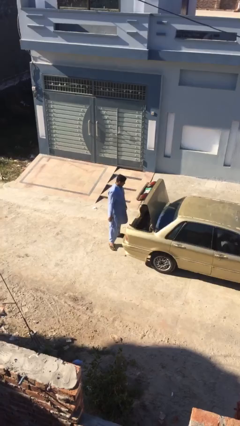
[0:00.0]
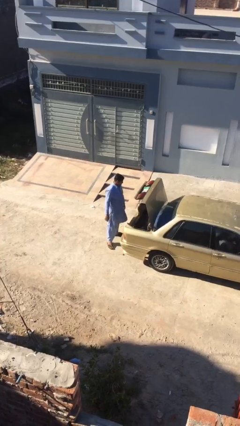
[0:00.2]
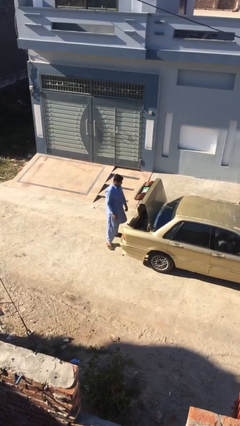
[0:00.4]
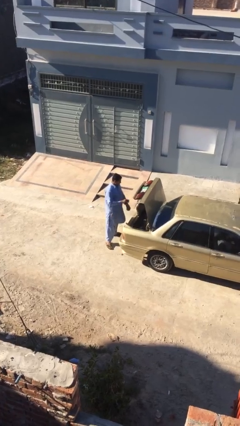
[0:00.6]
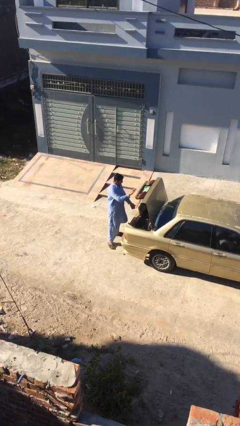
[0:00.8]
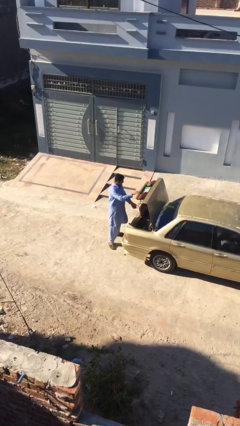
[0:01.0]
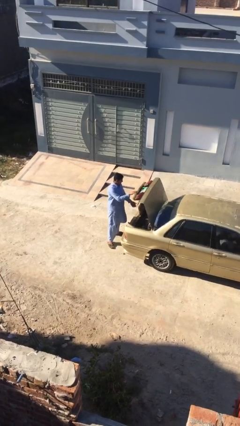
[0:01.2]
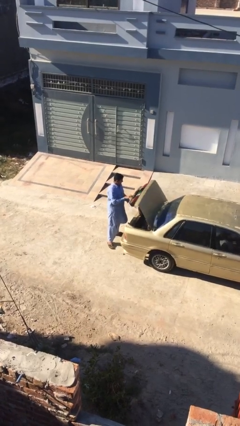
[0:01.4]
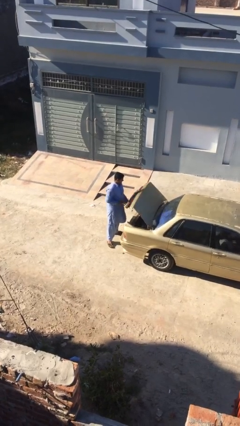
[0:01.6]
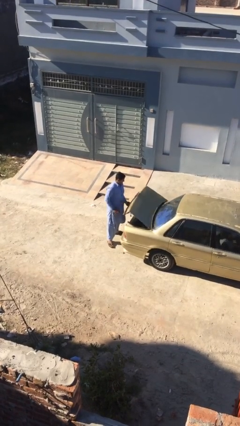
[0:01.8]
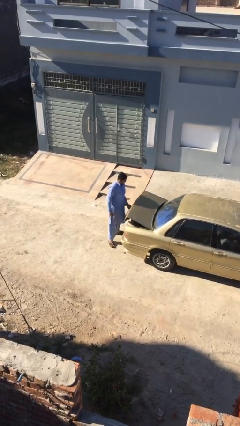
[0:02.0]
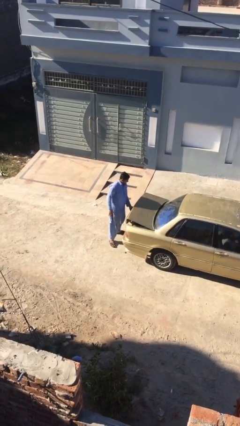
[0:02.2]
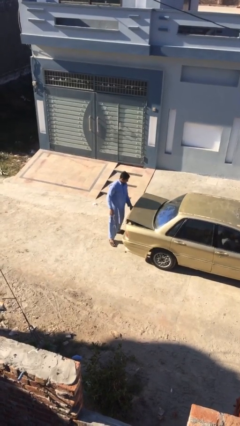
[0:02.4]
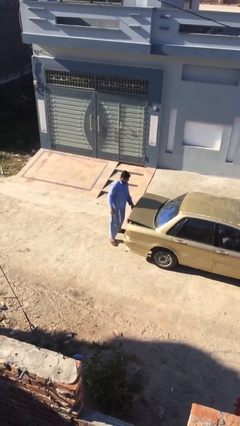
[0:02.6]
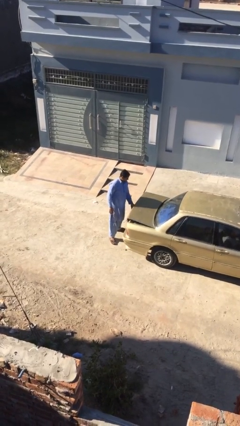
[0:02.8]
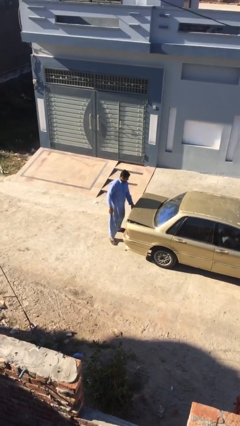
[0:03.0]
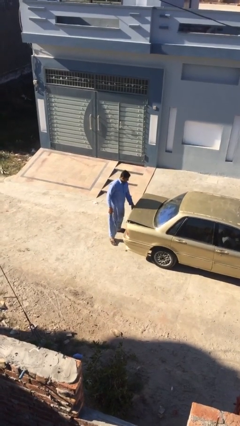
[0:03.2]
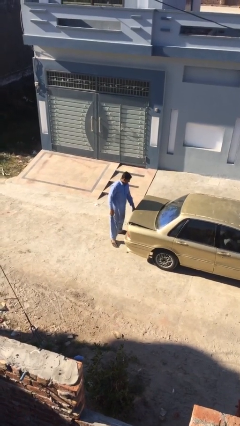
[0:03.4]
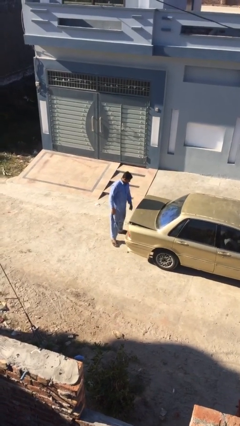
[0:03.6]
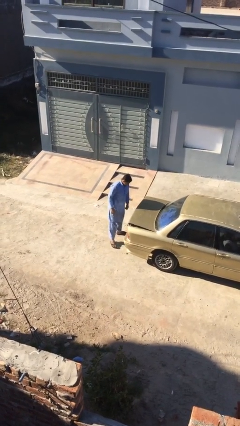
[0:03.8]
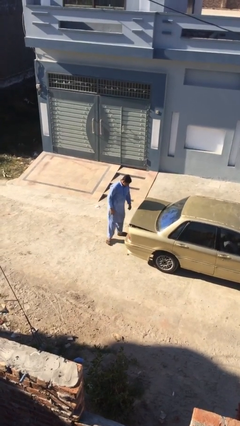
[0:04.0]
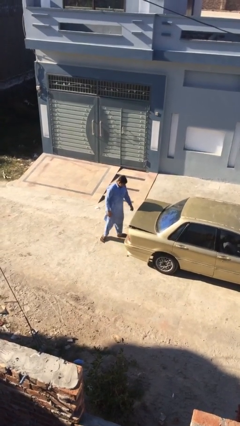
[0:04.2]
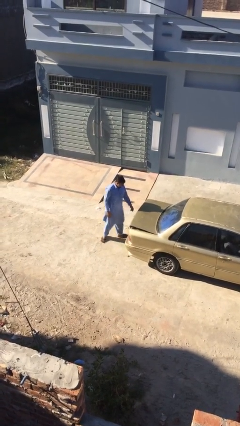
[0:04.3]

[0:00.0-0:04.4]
person closes car trunk

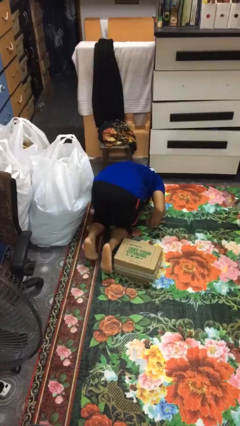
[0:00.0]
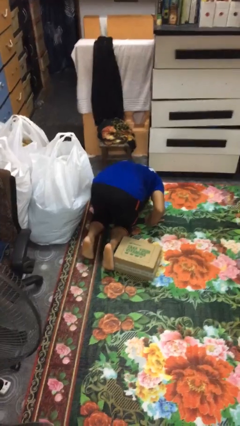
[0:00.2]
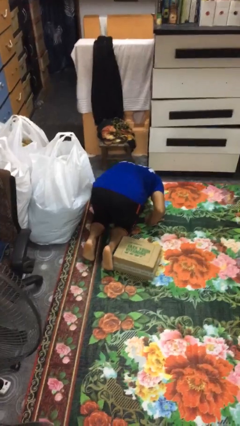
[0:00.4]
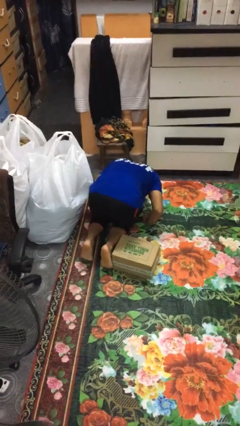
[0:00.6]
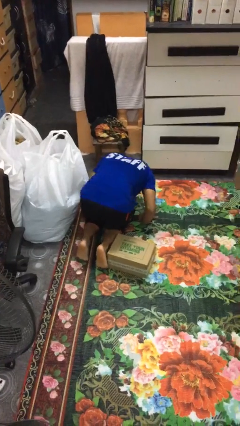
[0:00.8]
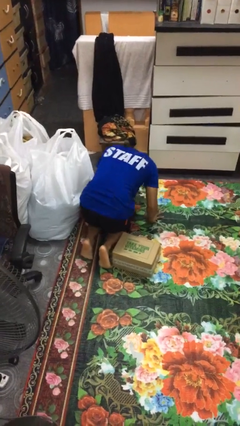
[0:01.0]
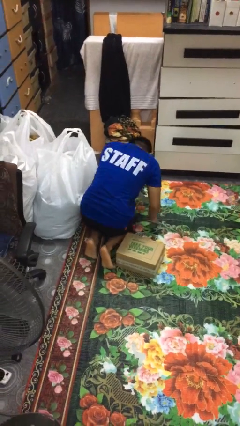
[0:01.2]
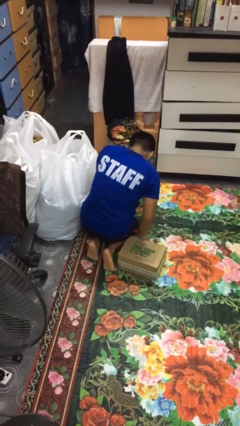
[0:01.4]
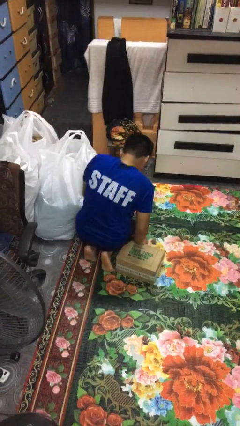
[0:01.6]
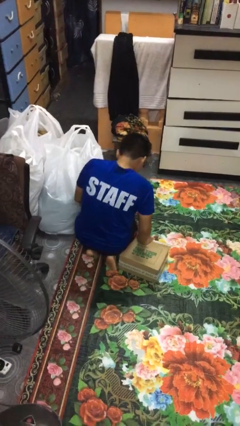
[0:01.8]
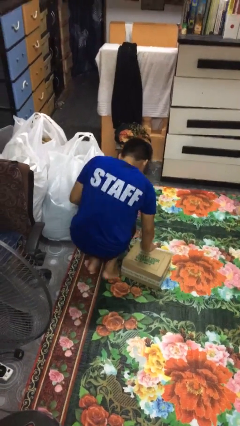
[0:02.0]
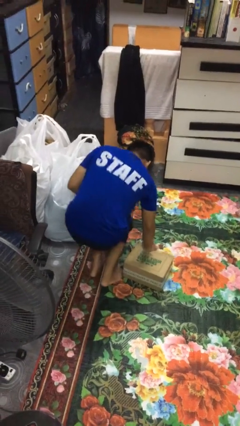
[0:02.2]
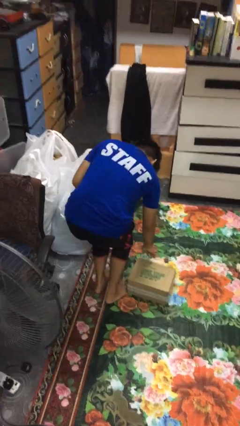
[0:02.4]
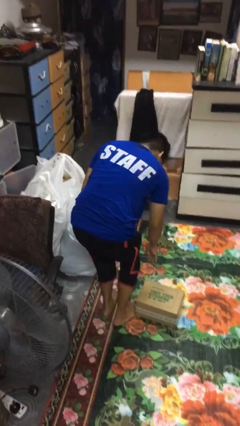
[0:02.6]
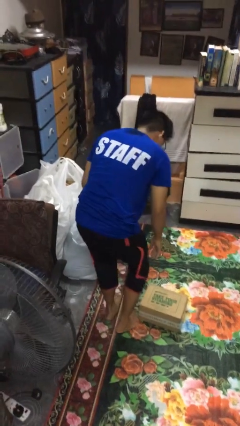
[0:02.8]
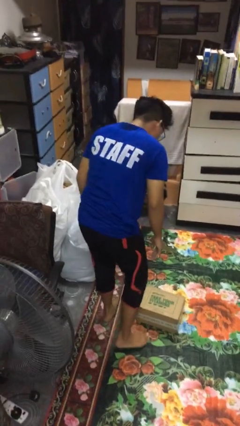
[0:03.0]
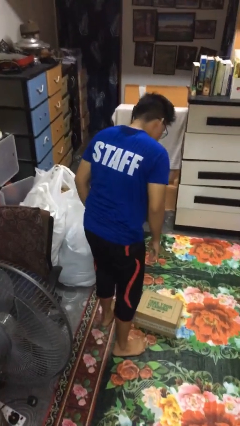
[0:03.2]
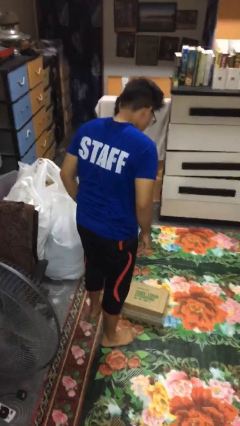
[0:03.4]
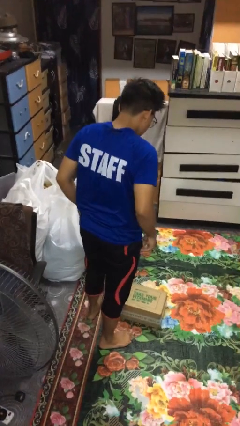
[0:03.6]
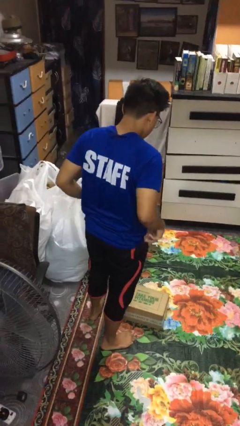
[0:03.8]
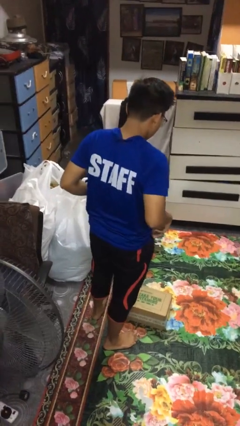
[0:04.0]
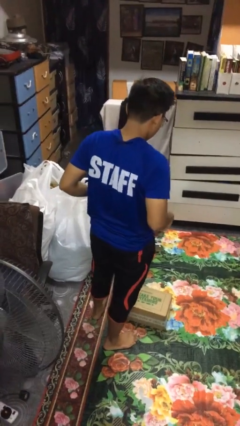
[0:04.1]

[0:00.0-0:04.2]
person stands up from floor

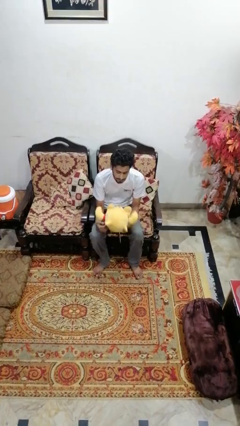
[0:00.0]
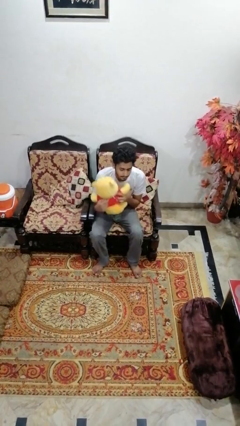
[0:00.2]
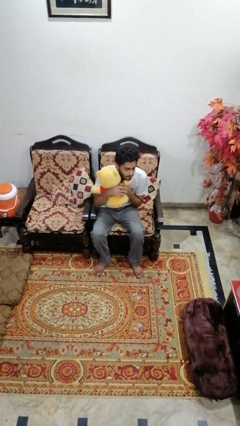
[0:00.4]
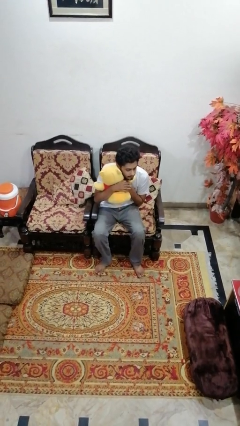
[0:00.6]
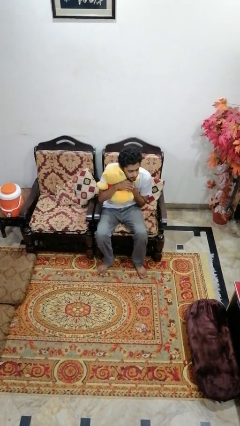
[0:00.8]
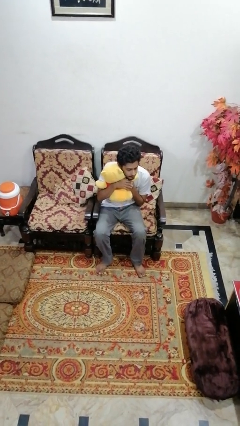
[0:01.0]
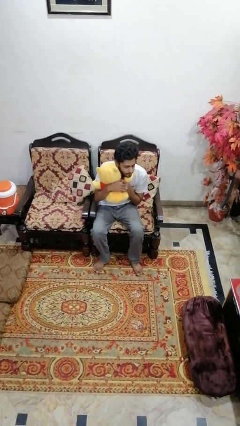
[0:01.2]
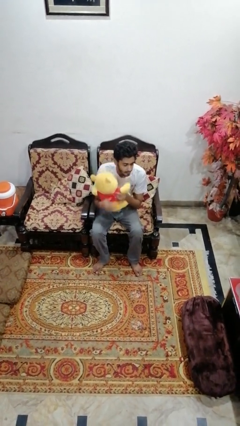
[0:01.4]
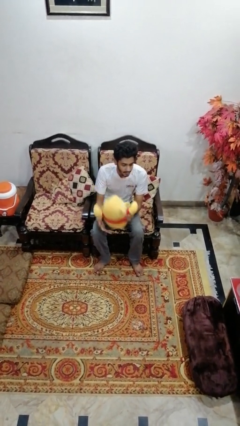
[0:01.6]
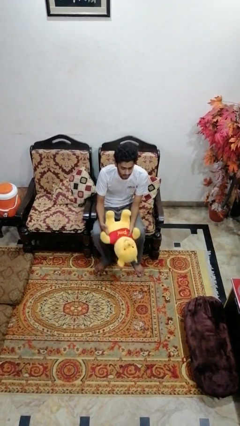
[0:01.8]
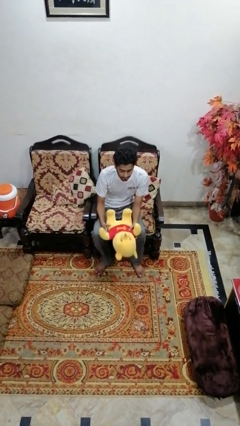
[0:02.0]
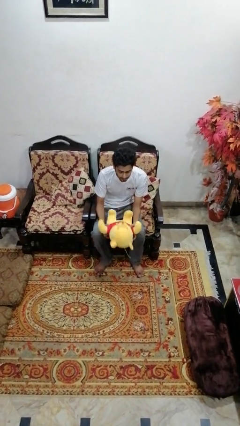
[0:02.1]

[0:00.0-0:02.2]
person hugs stuffed animal

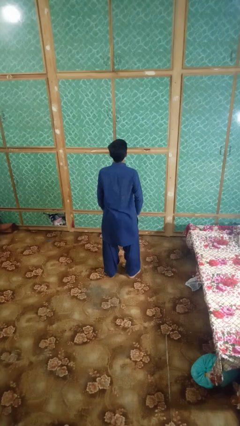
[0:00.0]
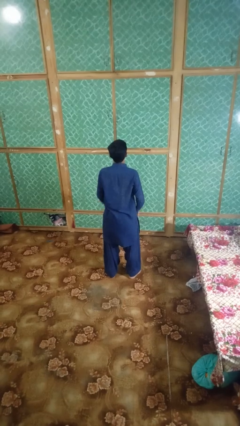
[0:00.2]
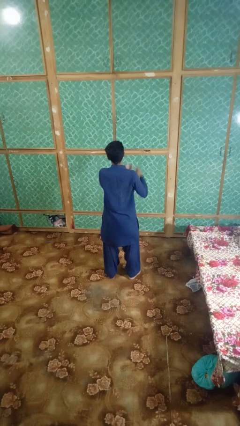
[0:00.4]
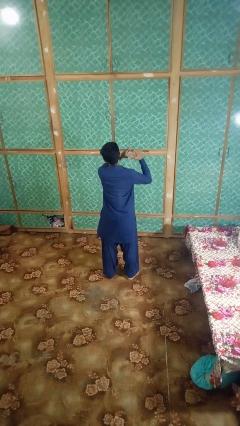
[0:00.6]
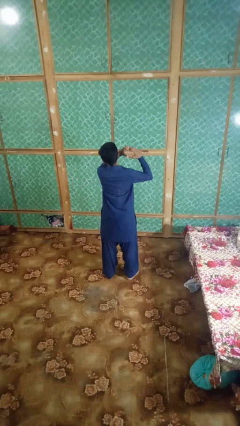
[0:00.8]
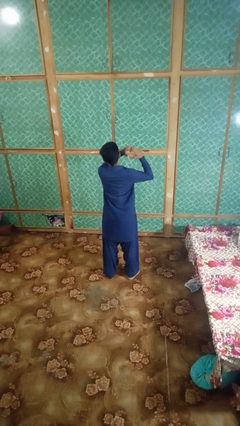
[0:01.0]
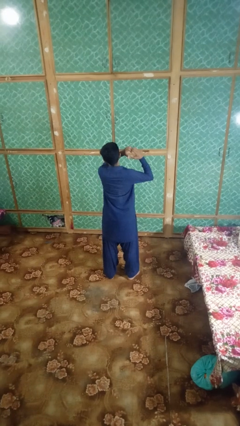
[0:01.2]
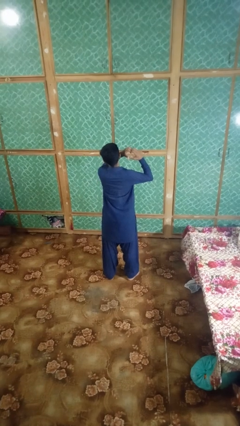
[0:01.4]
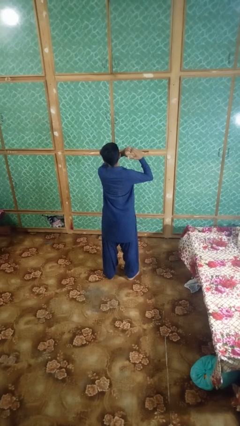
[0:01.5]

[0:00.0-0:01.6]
person gestures heart

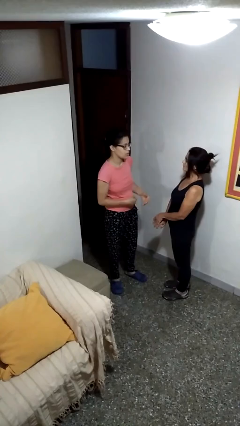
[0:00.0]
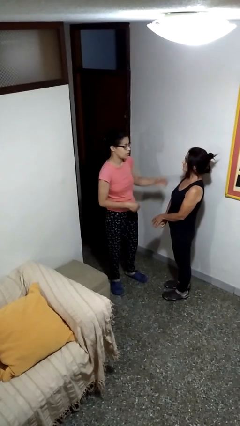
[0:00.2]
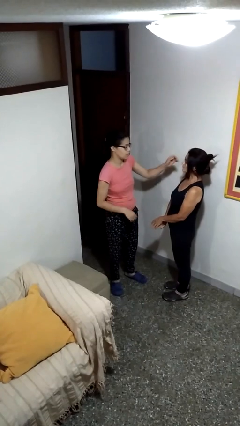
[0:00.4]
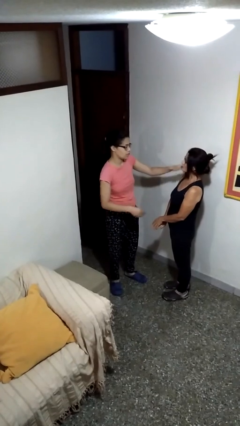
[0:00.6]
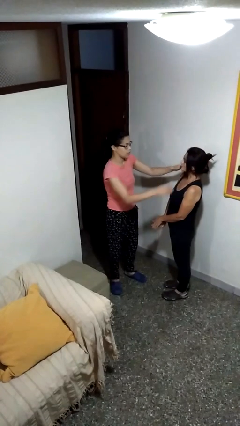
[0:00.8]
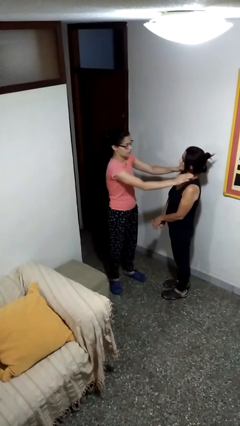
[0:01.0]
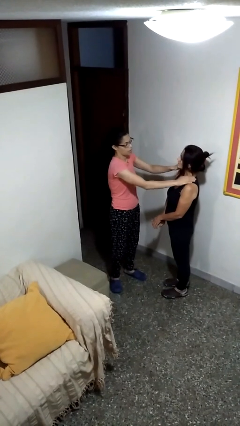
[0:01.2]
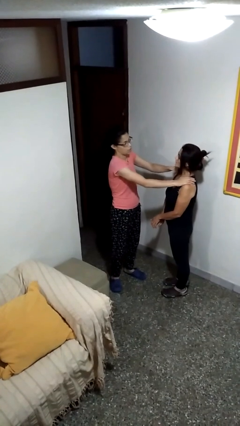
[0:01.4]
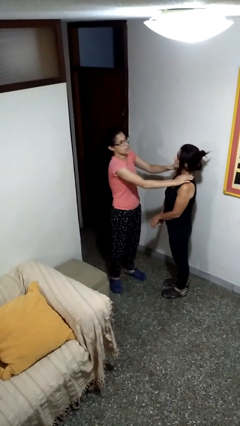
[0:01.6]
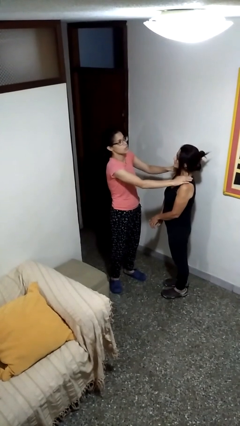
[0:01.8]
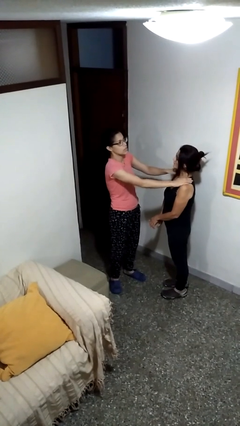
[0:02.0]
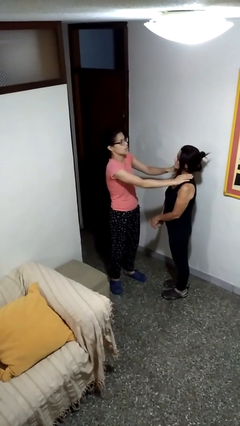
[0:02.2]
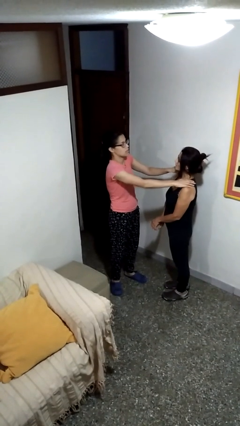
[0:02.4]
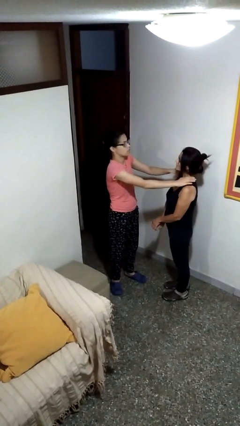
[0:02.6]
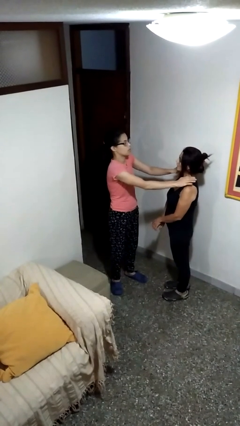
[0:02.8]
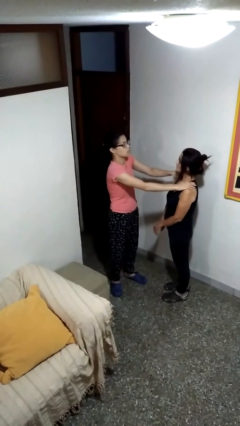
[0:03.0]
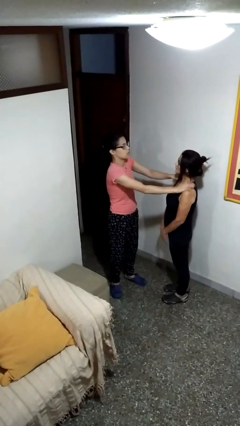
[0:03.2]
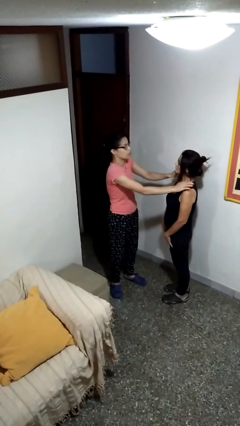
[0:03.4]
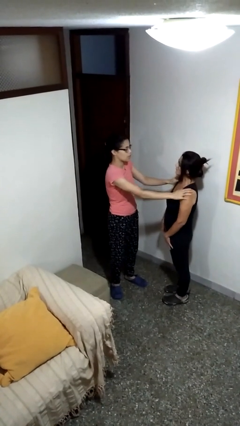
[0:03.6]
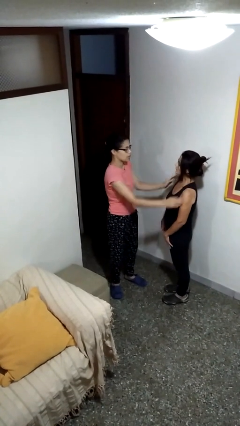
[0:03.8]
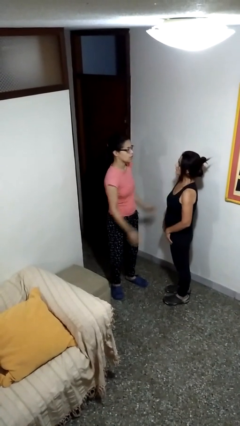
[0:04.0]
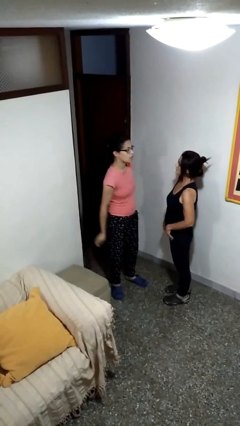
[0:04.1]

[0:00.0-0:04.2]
person pounds shoulders of person

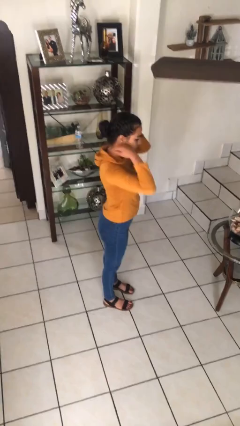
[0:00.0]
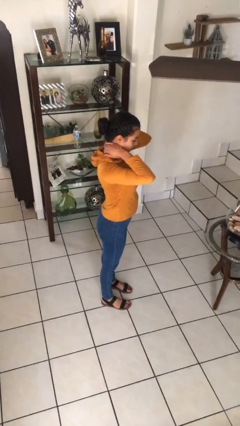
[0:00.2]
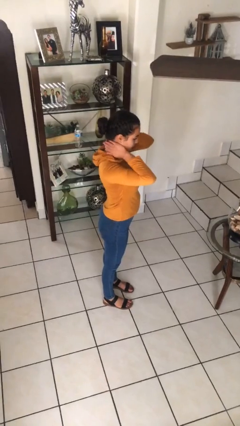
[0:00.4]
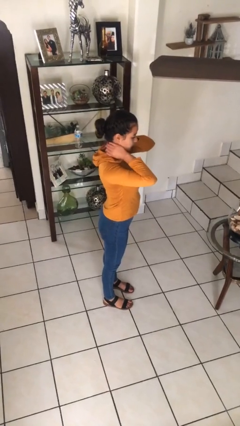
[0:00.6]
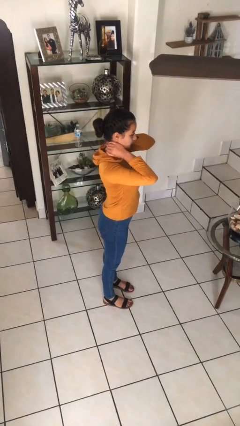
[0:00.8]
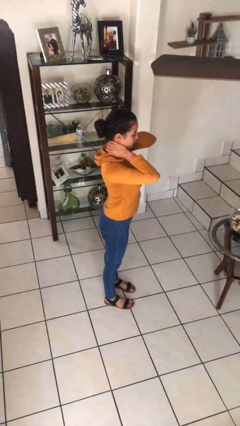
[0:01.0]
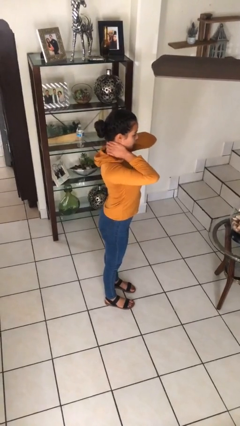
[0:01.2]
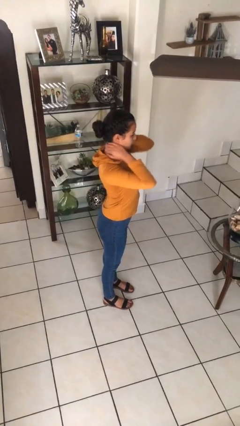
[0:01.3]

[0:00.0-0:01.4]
person rubs neck
